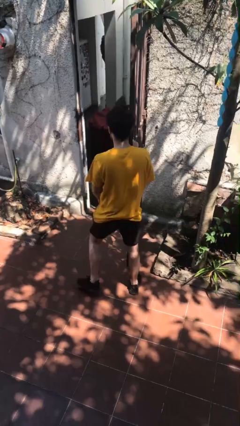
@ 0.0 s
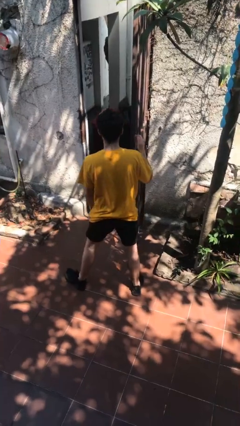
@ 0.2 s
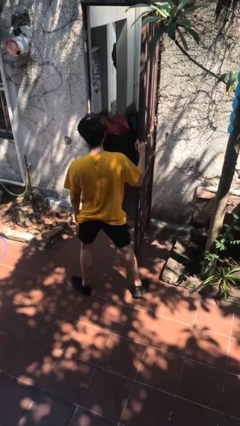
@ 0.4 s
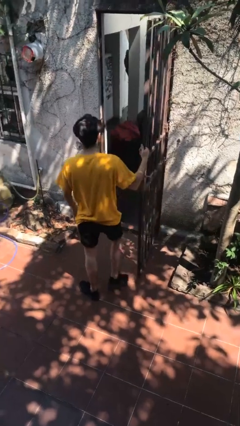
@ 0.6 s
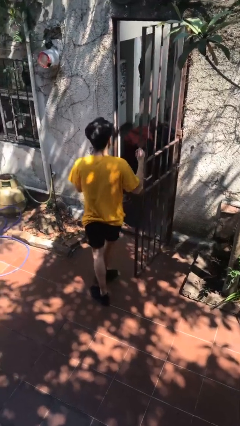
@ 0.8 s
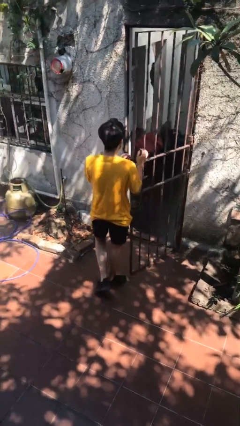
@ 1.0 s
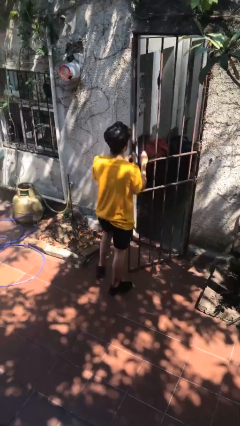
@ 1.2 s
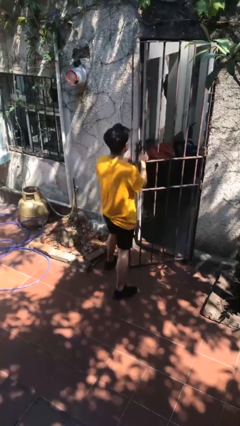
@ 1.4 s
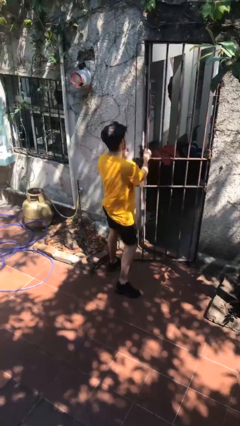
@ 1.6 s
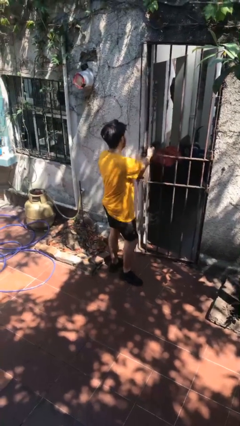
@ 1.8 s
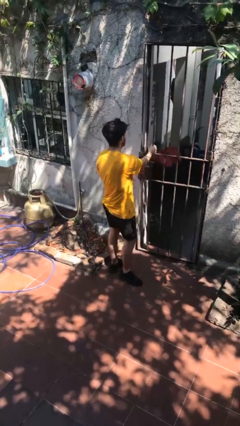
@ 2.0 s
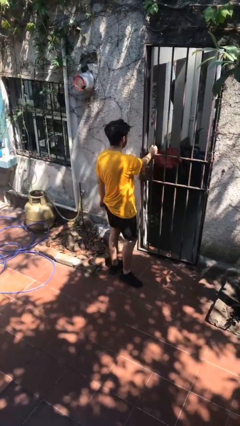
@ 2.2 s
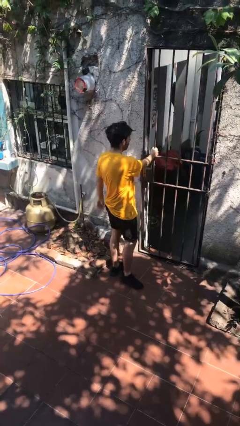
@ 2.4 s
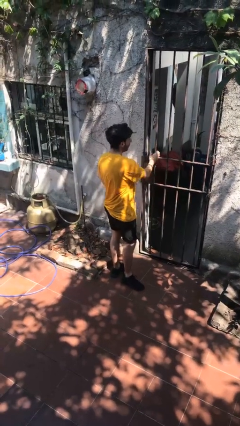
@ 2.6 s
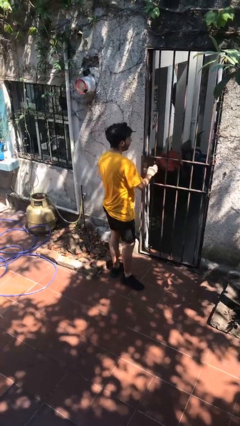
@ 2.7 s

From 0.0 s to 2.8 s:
person closes facility door

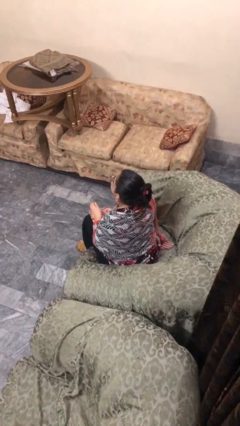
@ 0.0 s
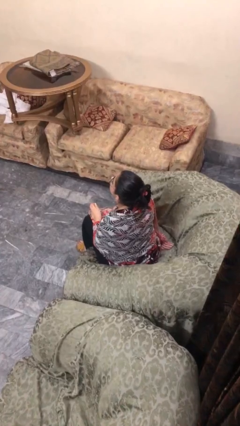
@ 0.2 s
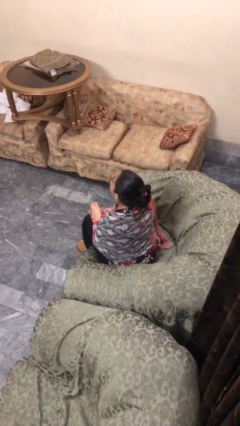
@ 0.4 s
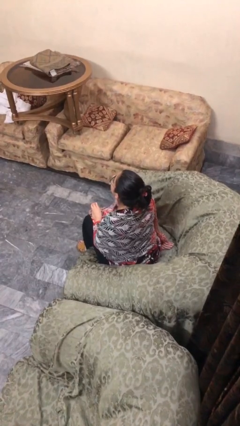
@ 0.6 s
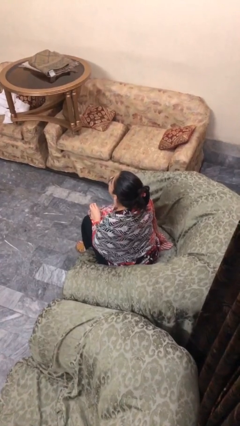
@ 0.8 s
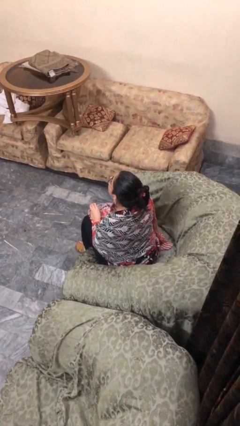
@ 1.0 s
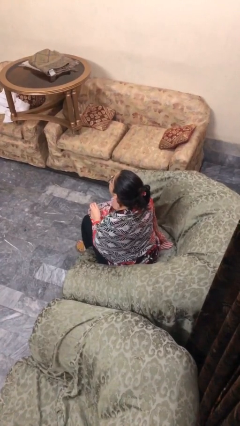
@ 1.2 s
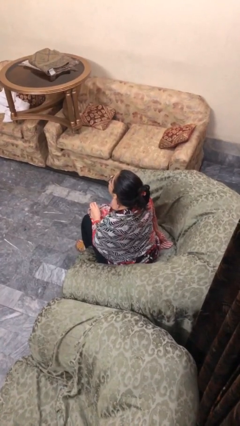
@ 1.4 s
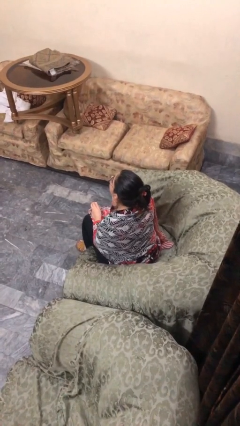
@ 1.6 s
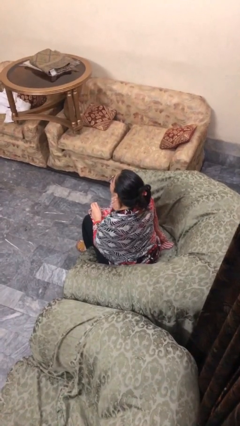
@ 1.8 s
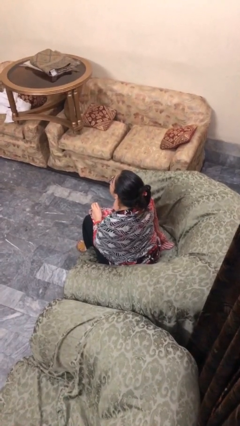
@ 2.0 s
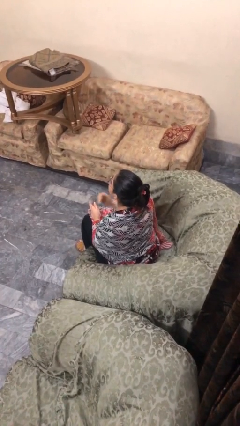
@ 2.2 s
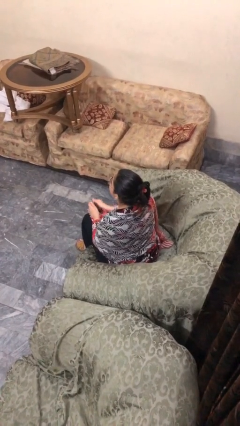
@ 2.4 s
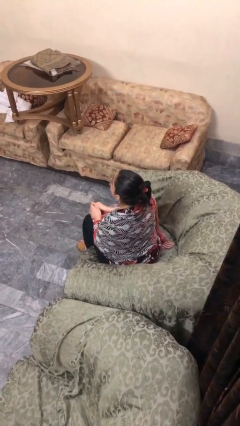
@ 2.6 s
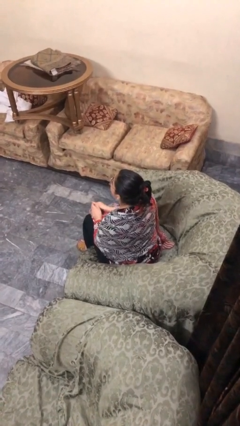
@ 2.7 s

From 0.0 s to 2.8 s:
person rubs neck

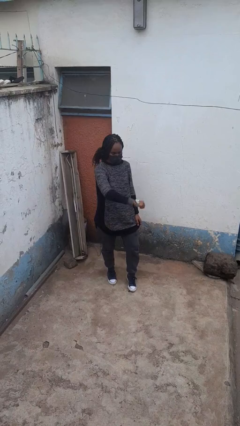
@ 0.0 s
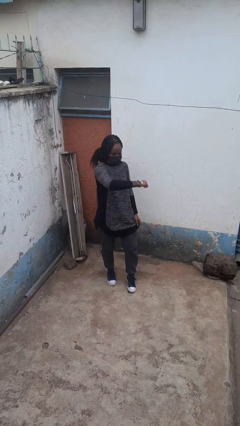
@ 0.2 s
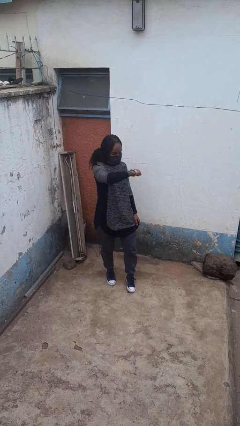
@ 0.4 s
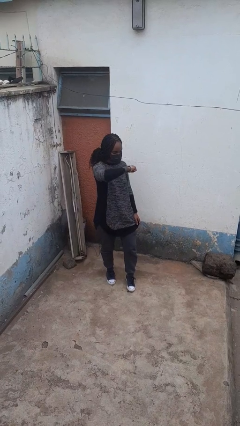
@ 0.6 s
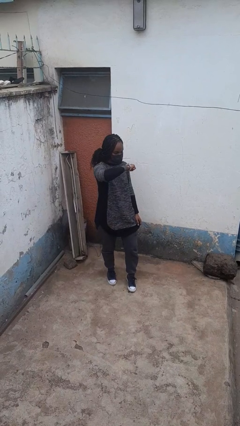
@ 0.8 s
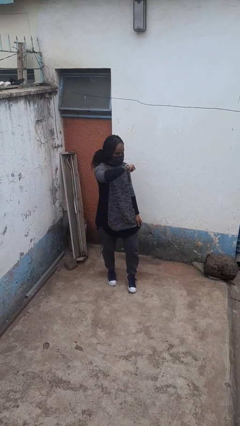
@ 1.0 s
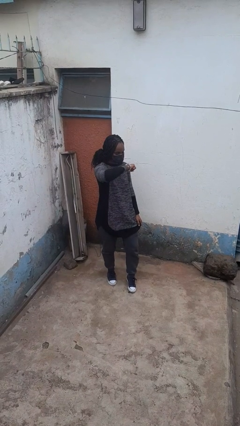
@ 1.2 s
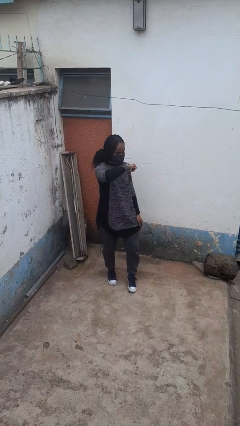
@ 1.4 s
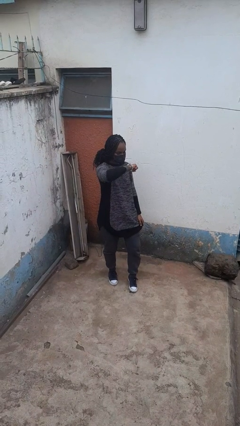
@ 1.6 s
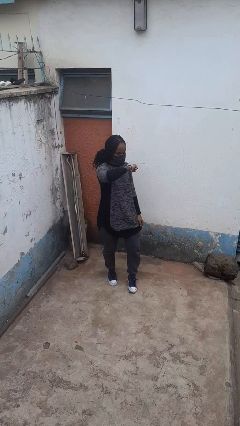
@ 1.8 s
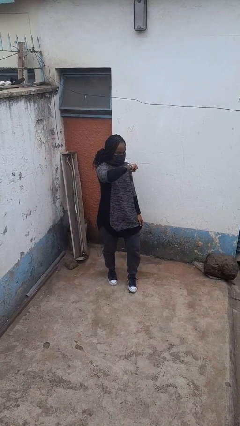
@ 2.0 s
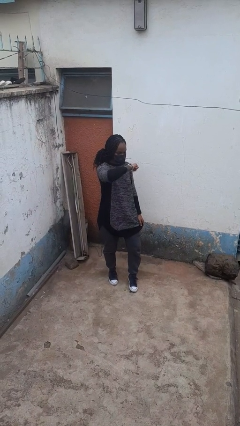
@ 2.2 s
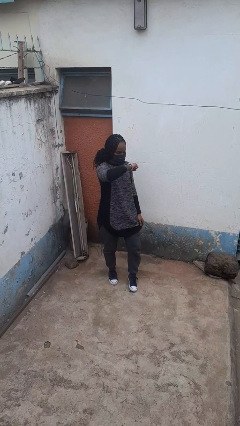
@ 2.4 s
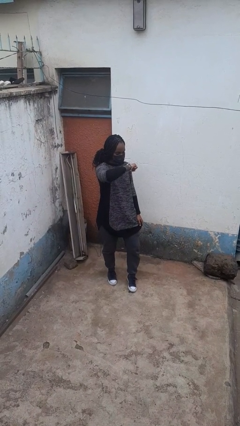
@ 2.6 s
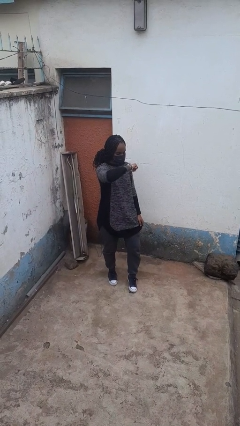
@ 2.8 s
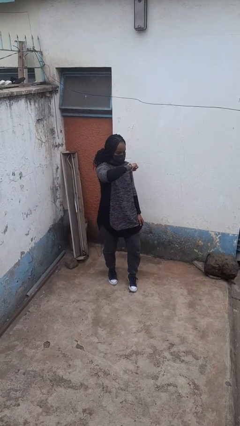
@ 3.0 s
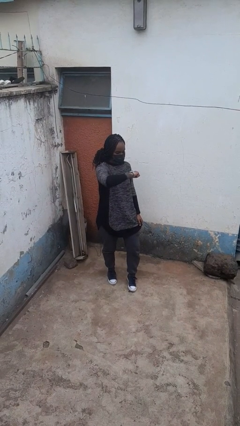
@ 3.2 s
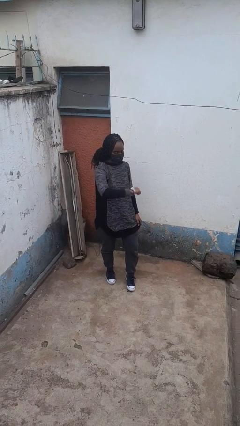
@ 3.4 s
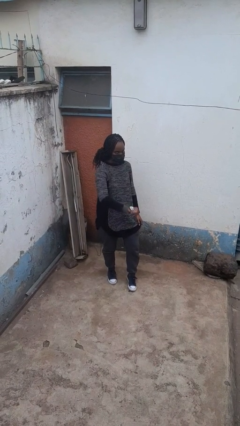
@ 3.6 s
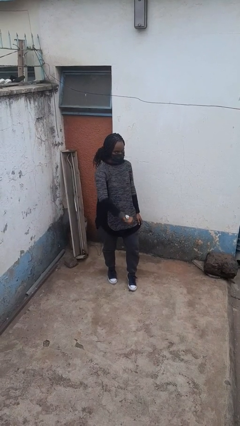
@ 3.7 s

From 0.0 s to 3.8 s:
person looks at wristwatch

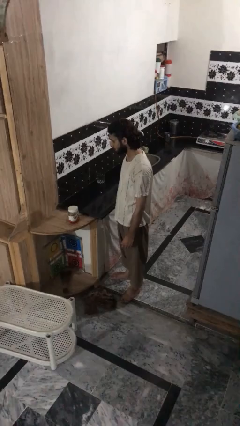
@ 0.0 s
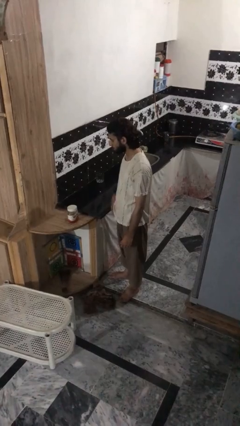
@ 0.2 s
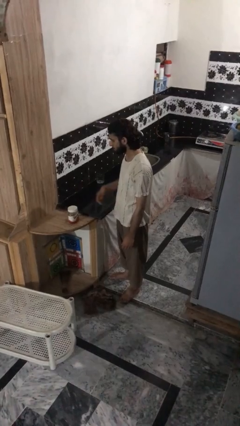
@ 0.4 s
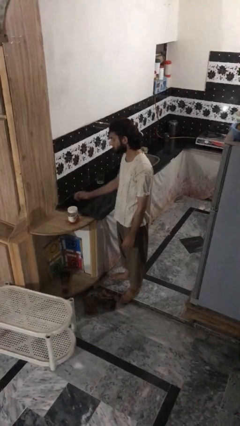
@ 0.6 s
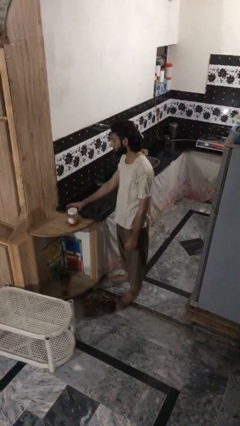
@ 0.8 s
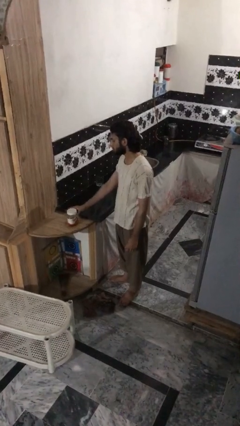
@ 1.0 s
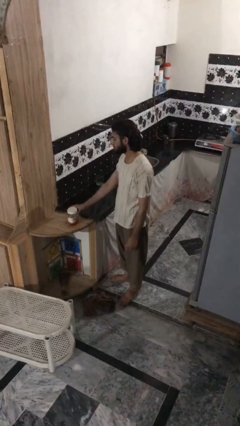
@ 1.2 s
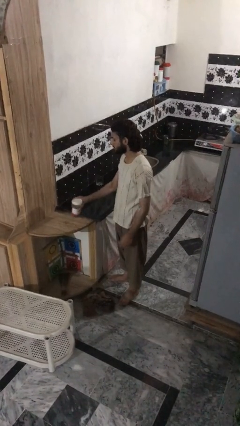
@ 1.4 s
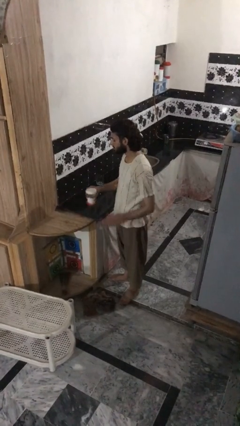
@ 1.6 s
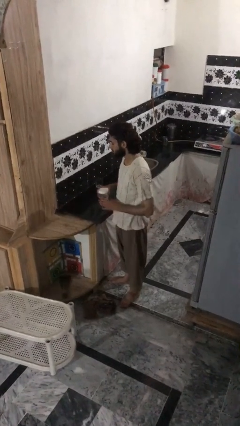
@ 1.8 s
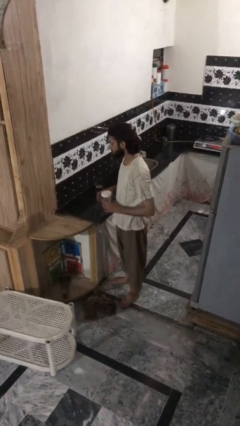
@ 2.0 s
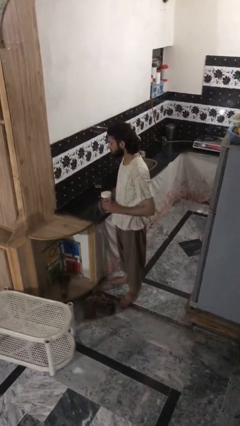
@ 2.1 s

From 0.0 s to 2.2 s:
person picks up object from countertop

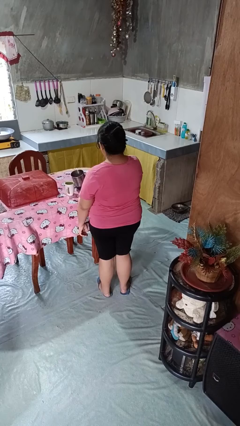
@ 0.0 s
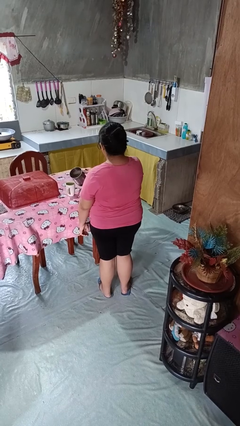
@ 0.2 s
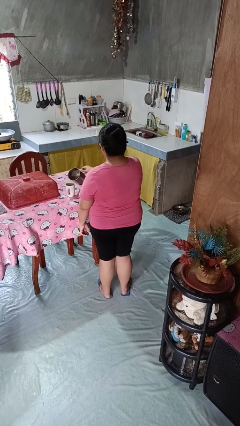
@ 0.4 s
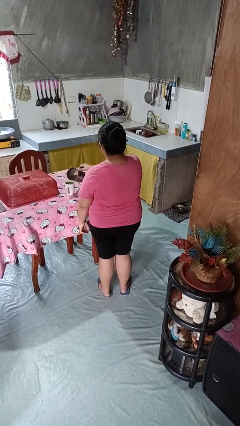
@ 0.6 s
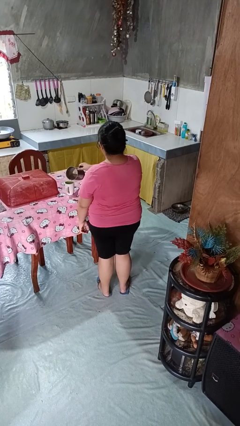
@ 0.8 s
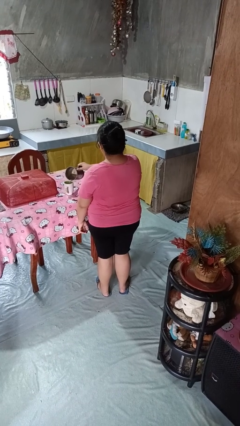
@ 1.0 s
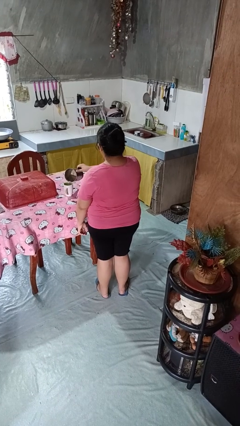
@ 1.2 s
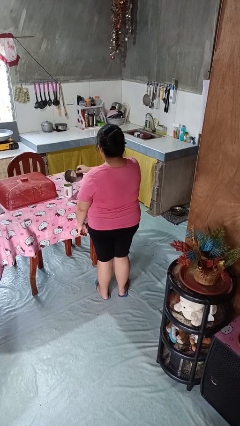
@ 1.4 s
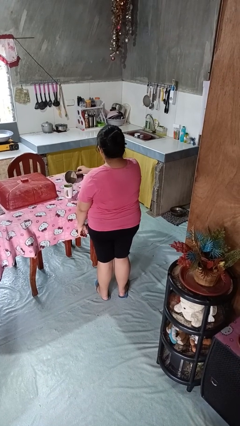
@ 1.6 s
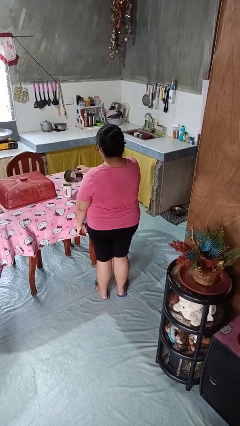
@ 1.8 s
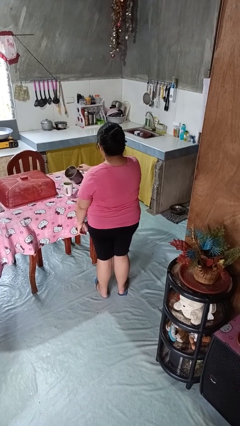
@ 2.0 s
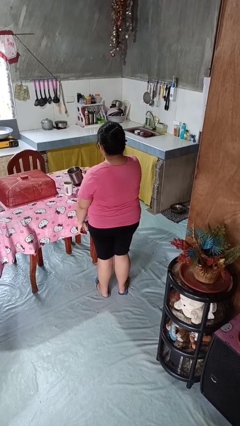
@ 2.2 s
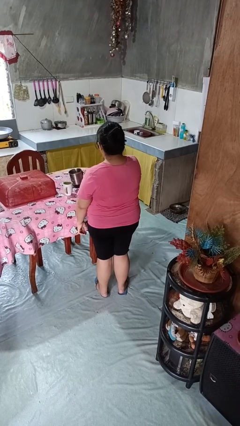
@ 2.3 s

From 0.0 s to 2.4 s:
person pours coffee into mug

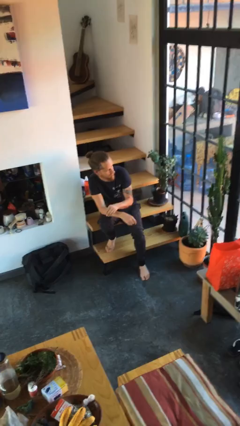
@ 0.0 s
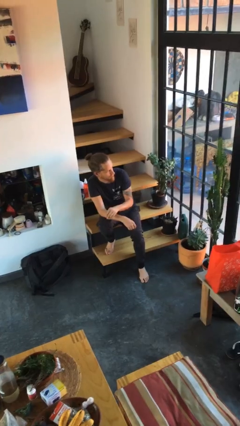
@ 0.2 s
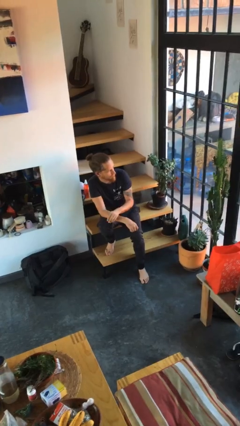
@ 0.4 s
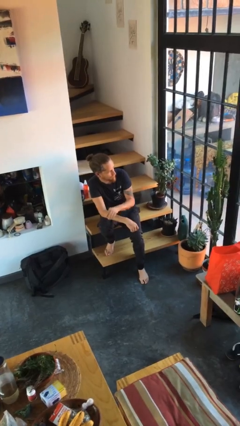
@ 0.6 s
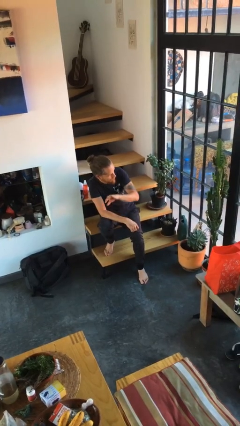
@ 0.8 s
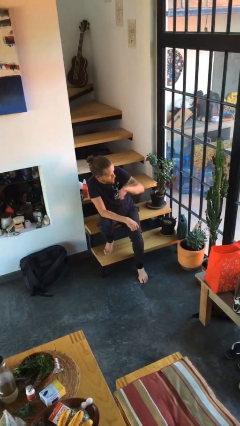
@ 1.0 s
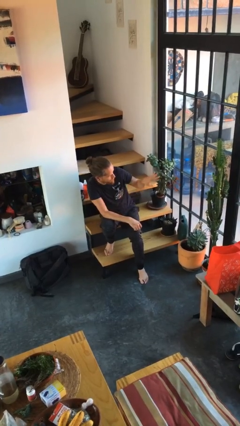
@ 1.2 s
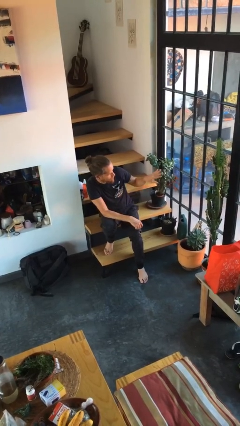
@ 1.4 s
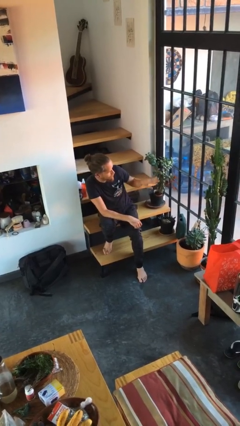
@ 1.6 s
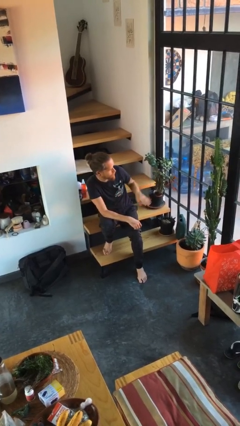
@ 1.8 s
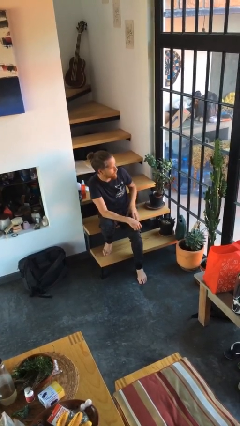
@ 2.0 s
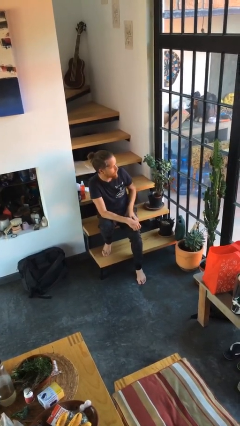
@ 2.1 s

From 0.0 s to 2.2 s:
person gestures swipe right

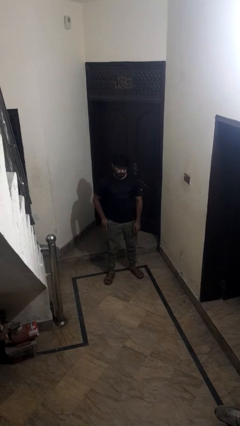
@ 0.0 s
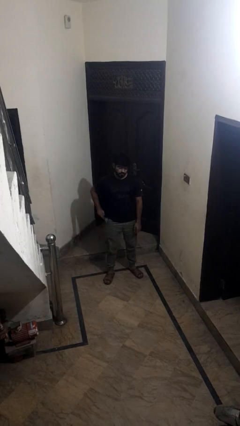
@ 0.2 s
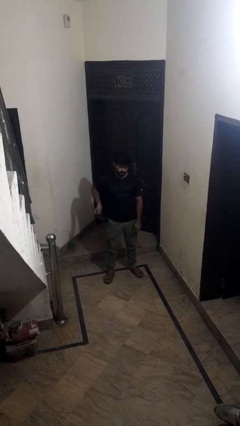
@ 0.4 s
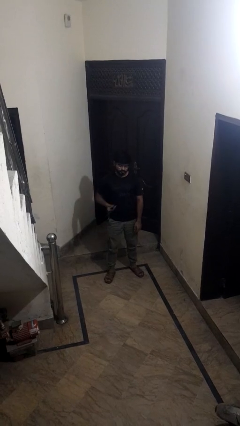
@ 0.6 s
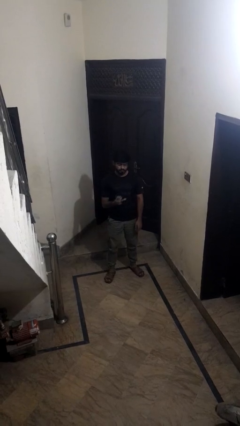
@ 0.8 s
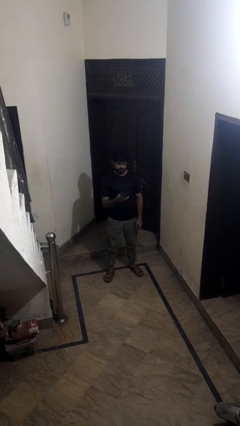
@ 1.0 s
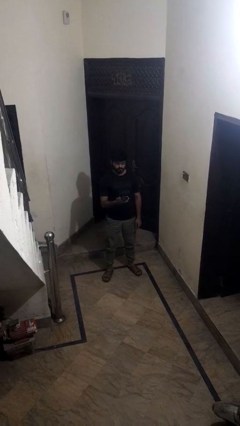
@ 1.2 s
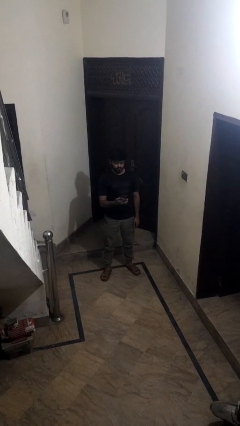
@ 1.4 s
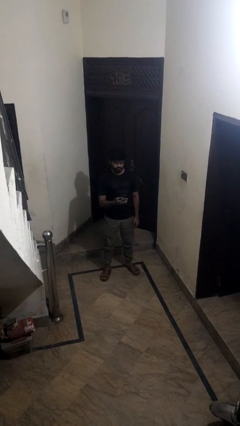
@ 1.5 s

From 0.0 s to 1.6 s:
person takes phone from pocket
